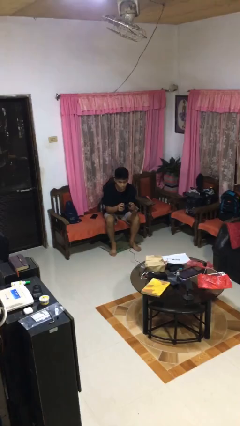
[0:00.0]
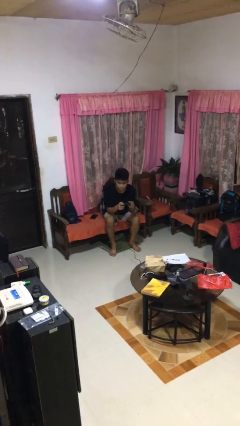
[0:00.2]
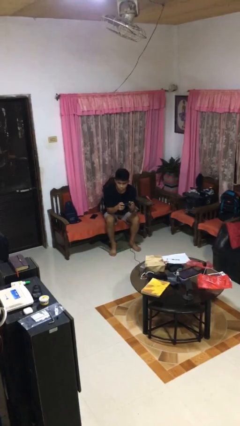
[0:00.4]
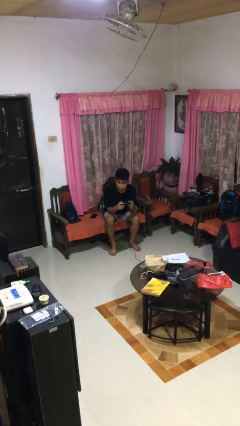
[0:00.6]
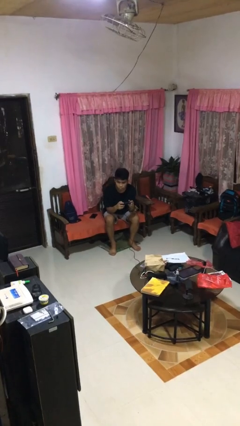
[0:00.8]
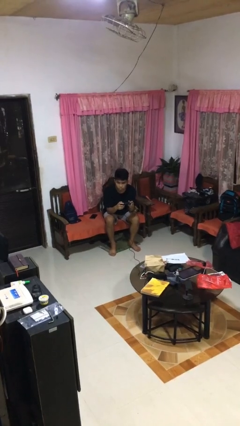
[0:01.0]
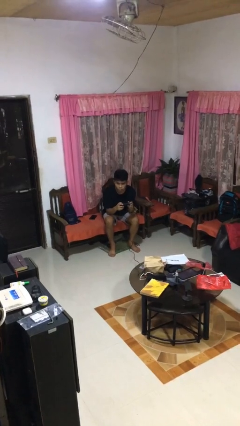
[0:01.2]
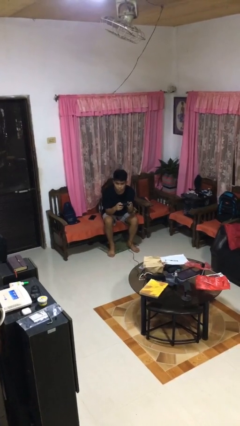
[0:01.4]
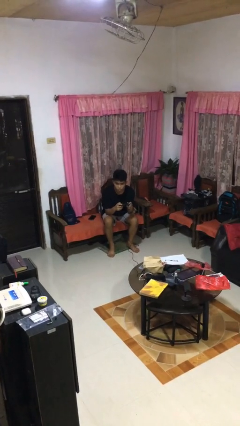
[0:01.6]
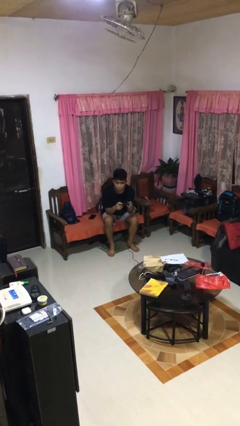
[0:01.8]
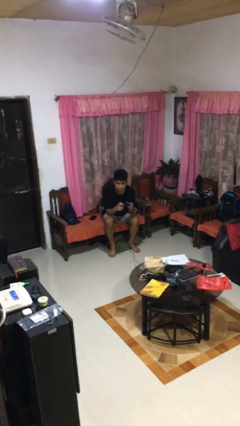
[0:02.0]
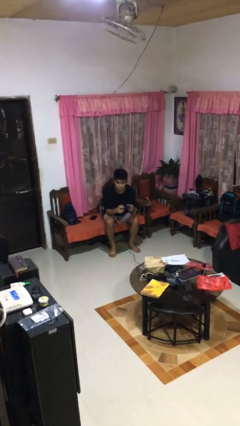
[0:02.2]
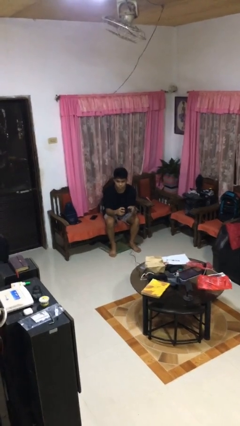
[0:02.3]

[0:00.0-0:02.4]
person interacts with handheld game

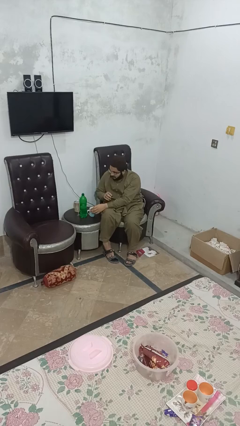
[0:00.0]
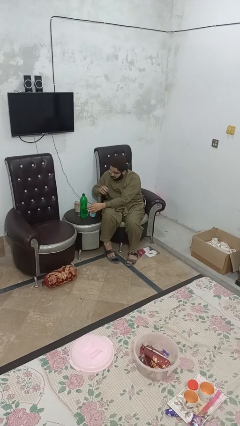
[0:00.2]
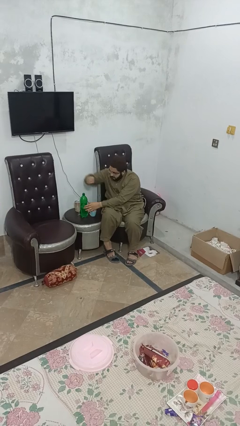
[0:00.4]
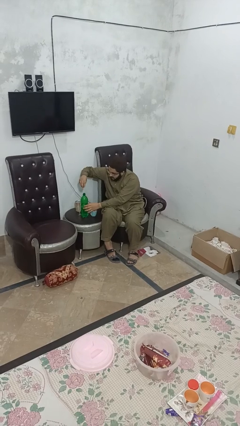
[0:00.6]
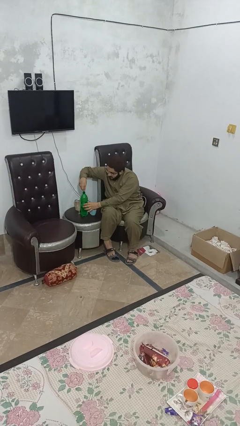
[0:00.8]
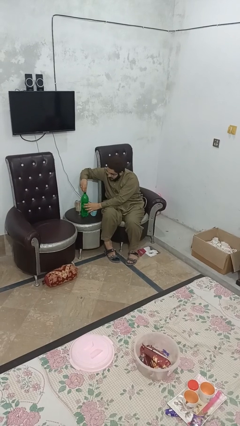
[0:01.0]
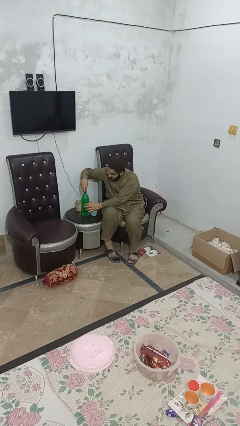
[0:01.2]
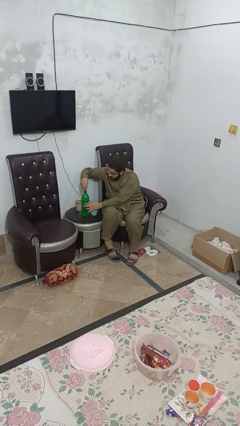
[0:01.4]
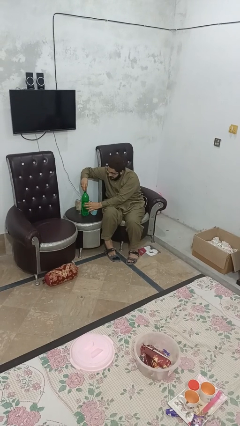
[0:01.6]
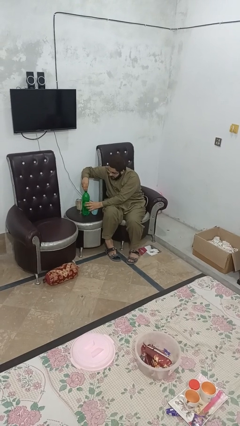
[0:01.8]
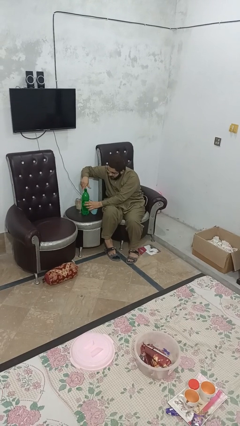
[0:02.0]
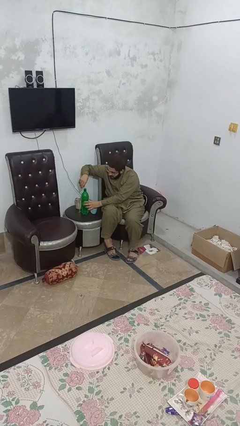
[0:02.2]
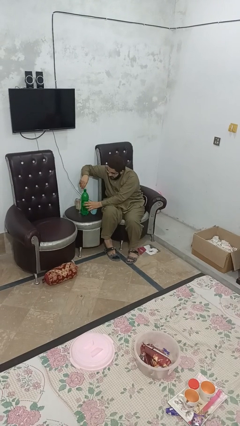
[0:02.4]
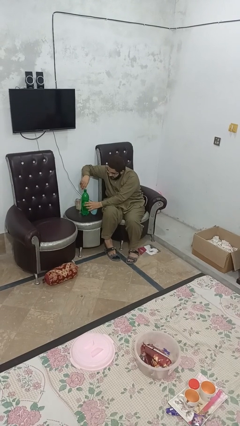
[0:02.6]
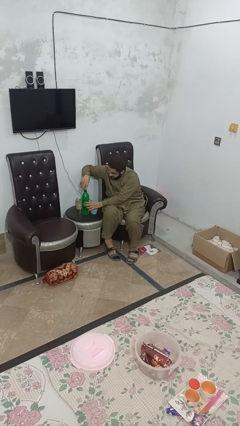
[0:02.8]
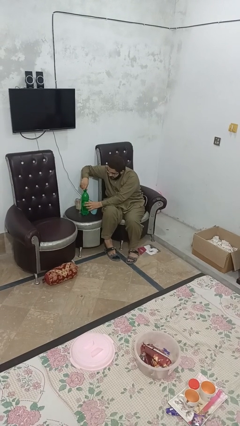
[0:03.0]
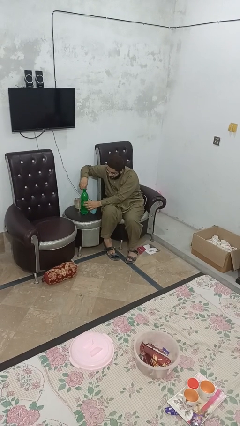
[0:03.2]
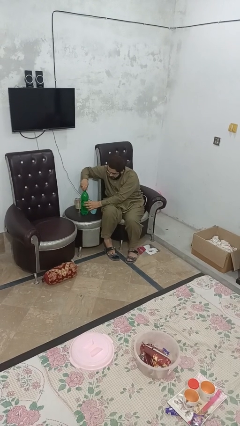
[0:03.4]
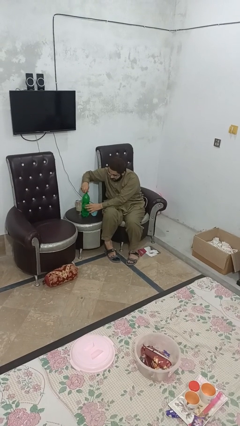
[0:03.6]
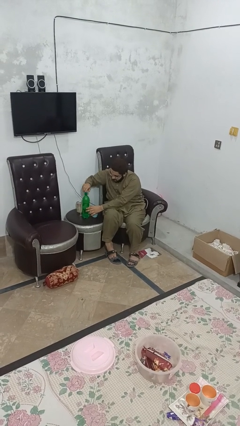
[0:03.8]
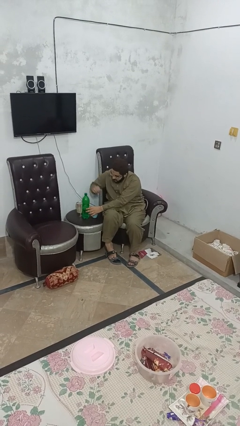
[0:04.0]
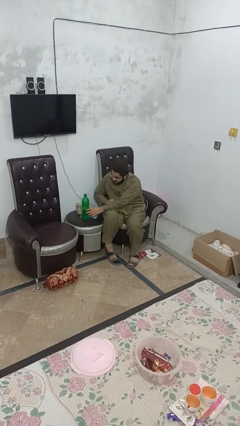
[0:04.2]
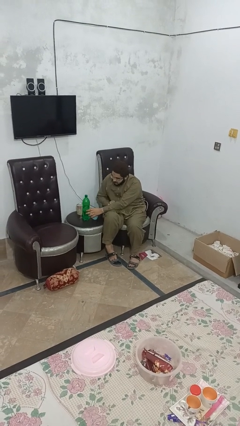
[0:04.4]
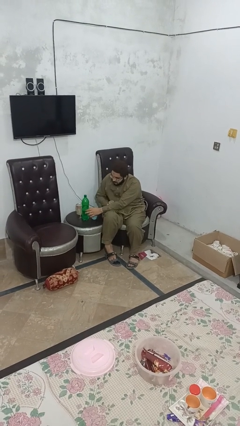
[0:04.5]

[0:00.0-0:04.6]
person screws lid to bottle

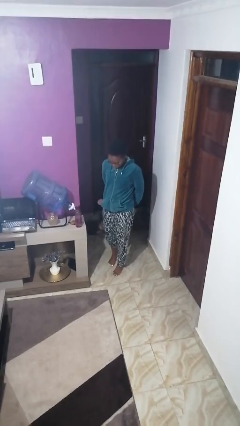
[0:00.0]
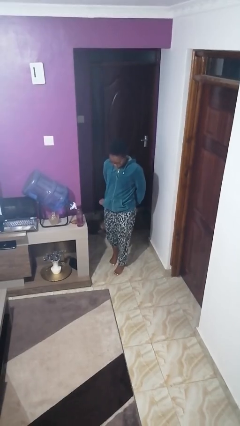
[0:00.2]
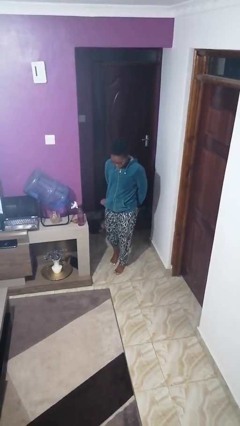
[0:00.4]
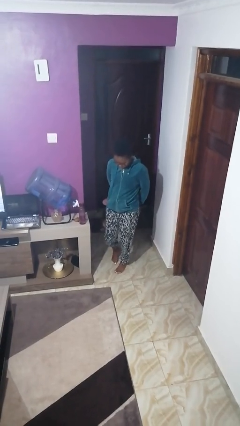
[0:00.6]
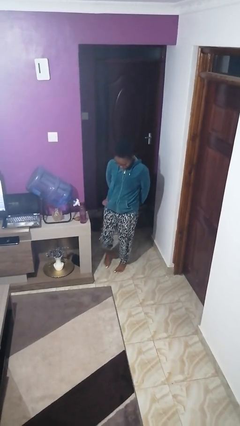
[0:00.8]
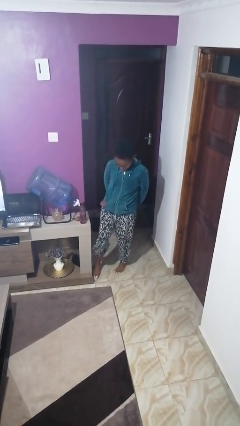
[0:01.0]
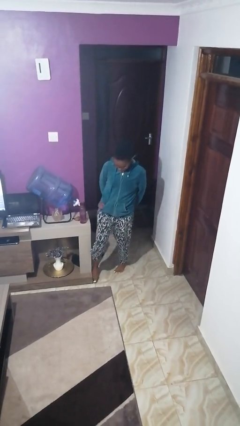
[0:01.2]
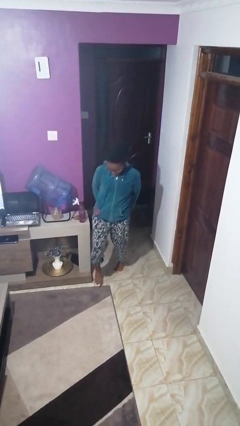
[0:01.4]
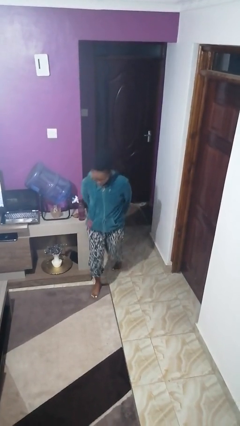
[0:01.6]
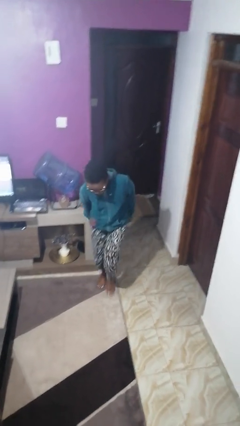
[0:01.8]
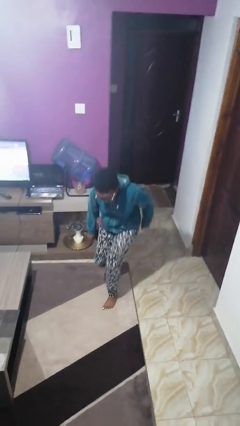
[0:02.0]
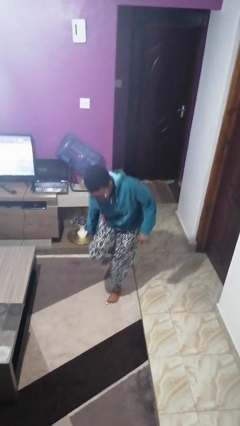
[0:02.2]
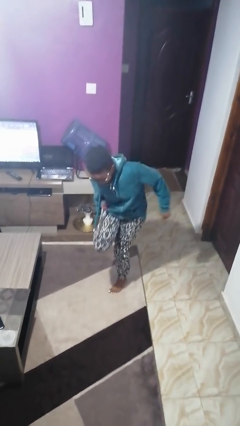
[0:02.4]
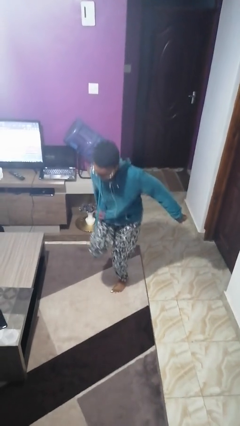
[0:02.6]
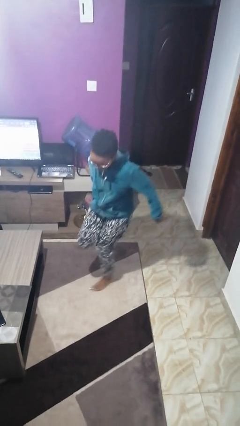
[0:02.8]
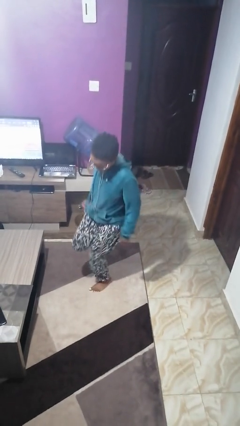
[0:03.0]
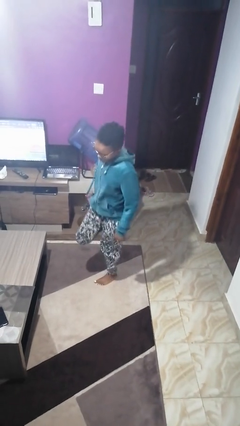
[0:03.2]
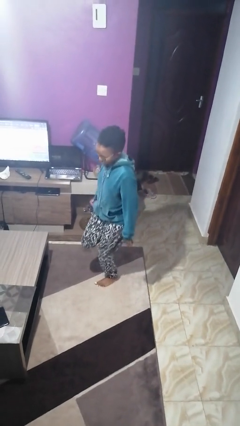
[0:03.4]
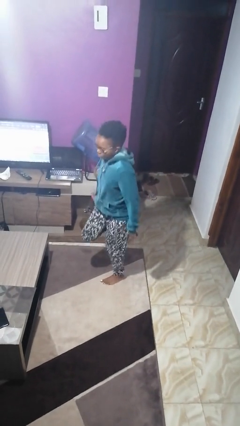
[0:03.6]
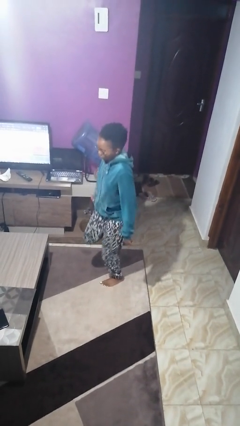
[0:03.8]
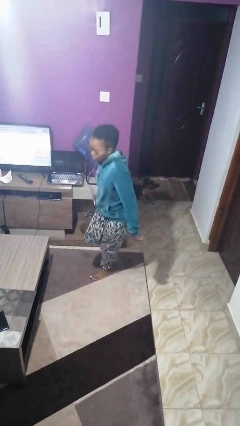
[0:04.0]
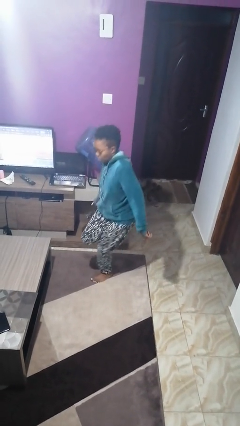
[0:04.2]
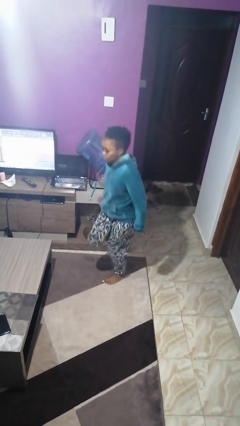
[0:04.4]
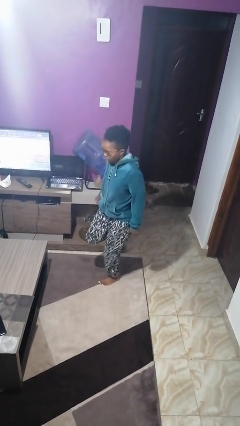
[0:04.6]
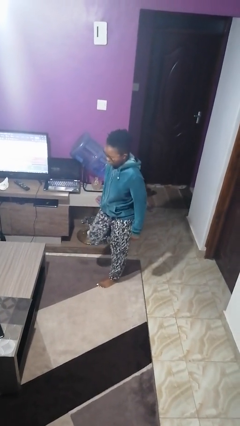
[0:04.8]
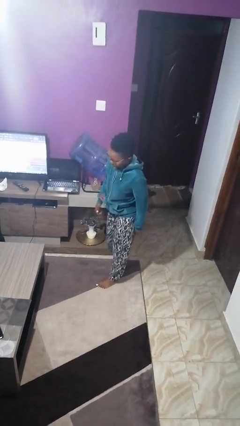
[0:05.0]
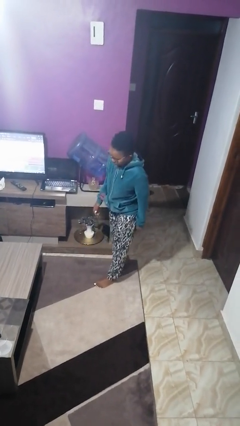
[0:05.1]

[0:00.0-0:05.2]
person stubs toe

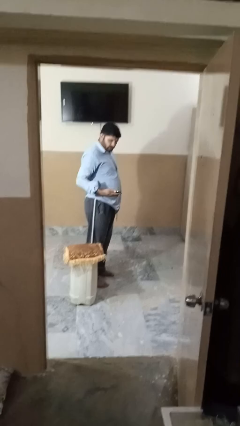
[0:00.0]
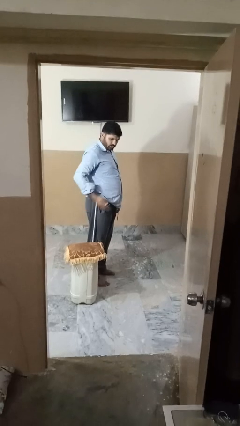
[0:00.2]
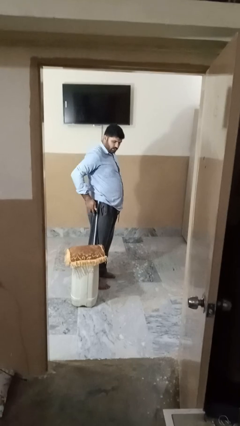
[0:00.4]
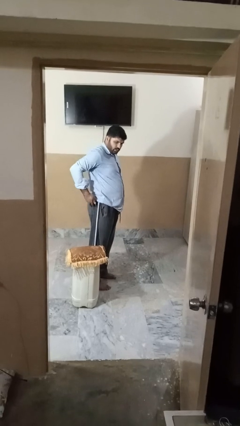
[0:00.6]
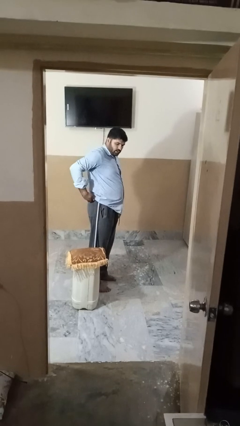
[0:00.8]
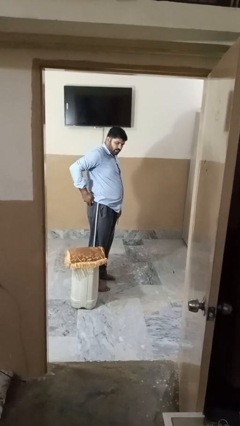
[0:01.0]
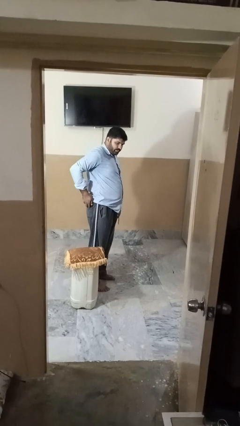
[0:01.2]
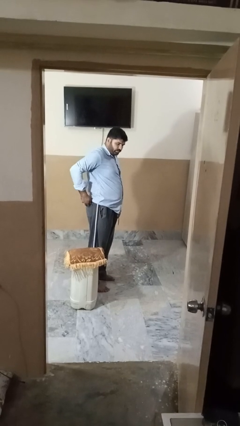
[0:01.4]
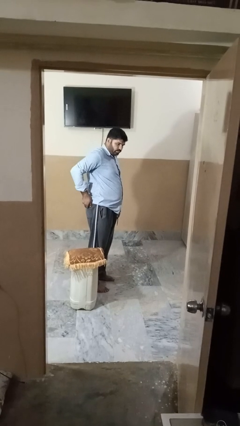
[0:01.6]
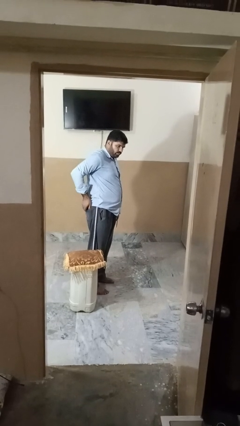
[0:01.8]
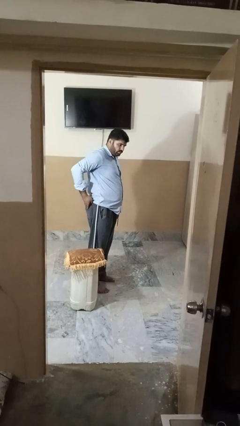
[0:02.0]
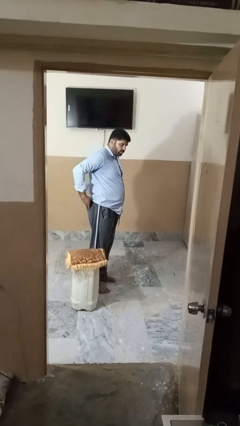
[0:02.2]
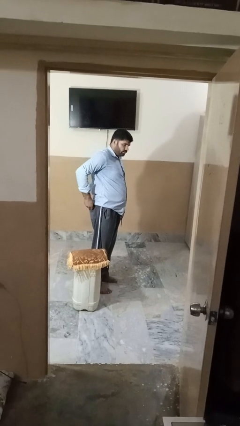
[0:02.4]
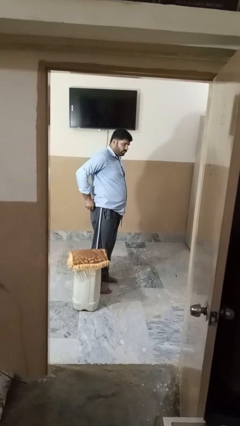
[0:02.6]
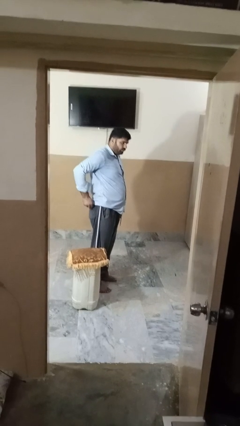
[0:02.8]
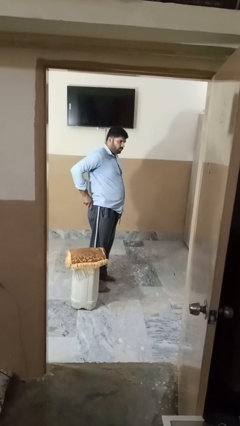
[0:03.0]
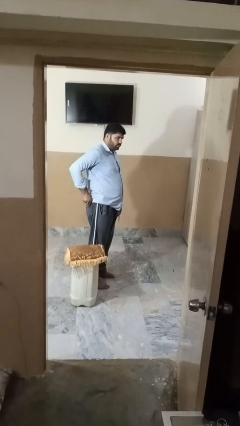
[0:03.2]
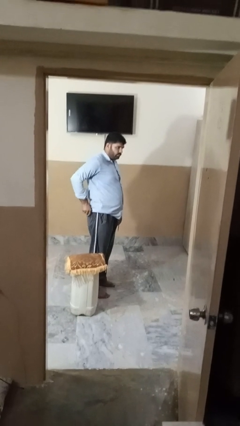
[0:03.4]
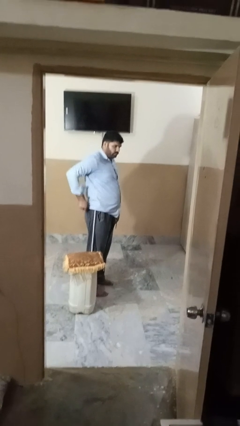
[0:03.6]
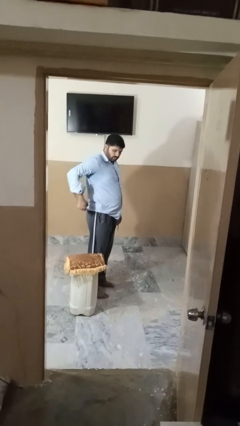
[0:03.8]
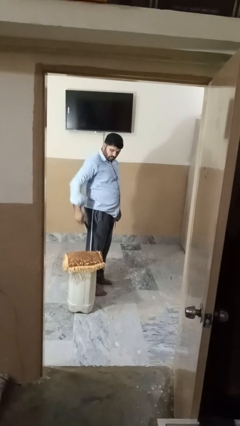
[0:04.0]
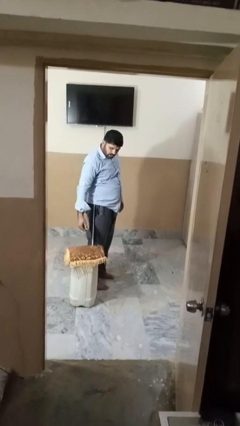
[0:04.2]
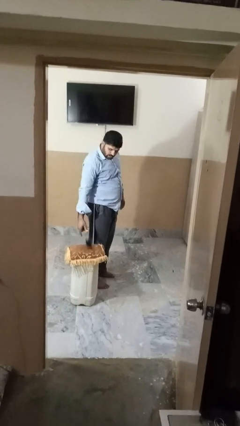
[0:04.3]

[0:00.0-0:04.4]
person puts phone into pocket

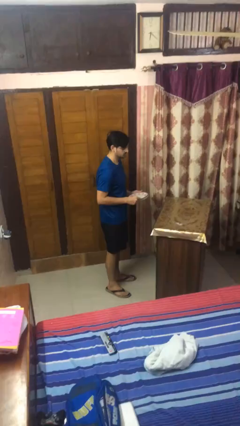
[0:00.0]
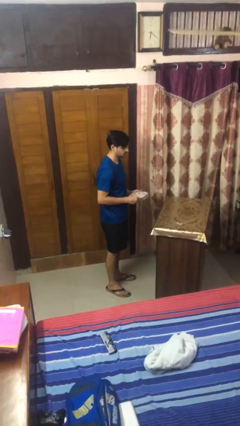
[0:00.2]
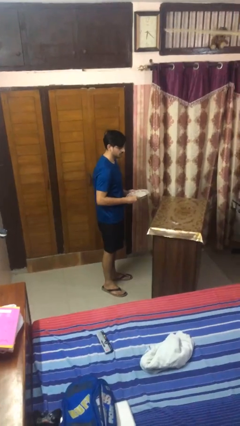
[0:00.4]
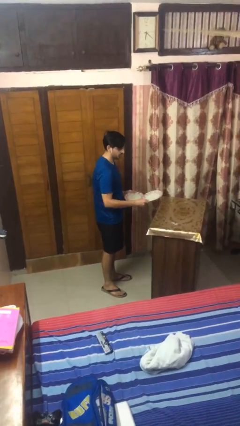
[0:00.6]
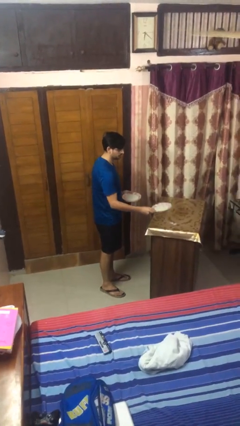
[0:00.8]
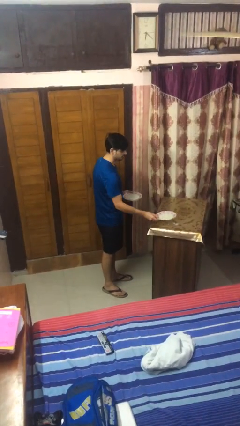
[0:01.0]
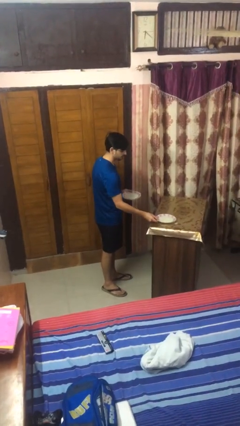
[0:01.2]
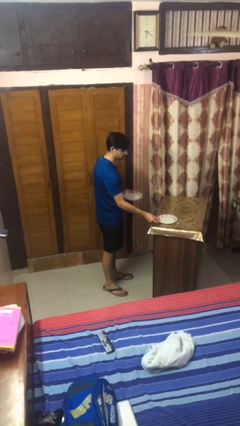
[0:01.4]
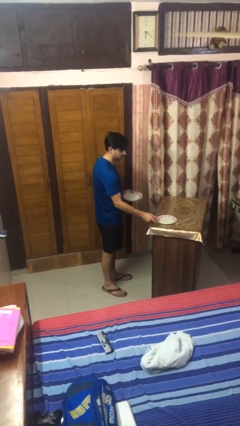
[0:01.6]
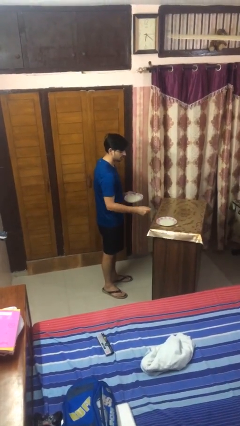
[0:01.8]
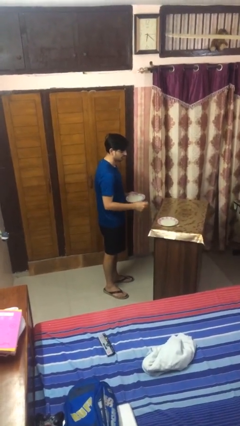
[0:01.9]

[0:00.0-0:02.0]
person sets table
